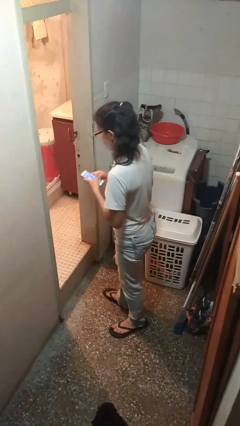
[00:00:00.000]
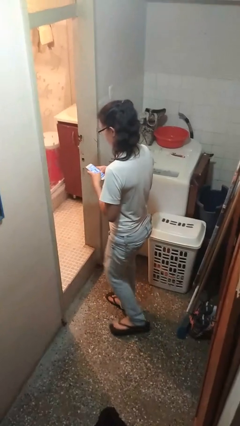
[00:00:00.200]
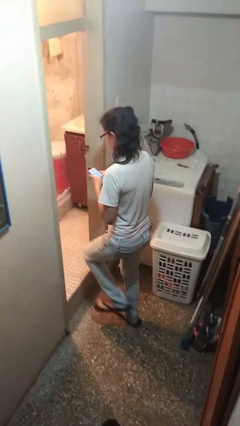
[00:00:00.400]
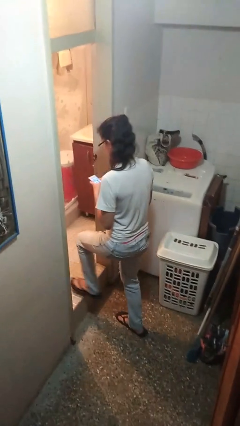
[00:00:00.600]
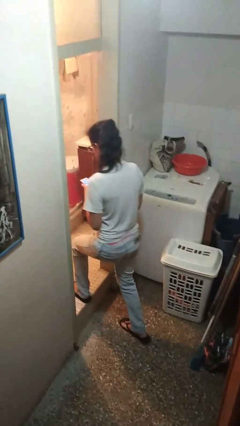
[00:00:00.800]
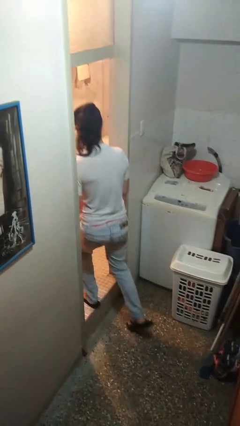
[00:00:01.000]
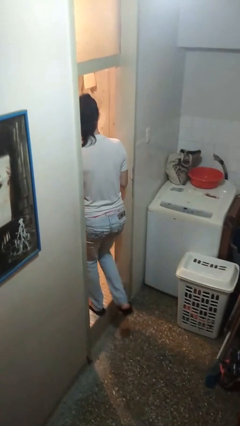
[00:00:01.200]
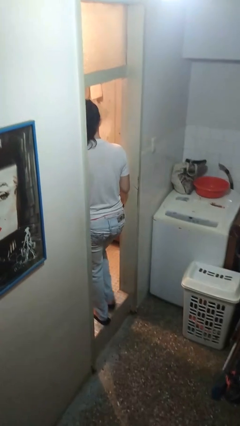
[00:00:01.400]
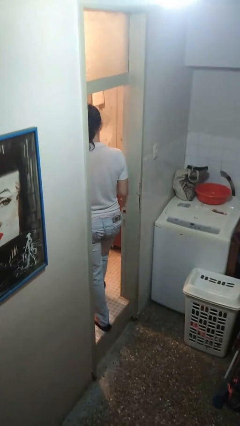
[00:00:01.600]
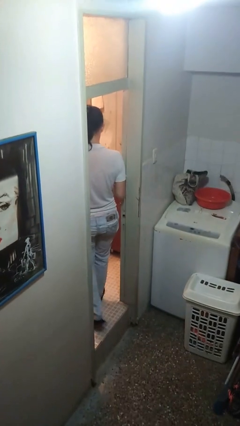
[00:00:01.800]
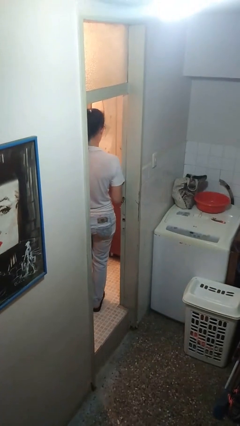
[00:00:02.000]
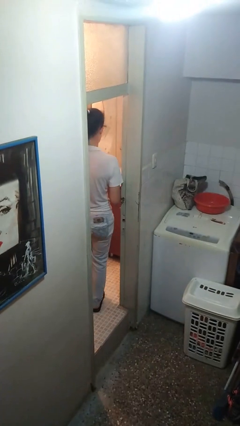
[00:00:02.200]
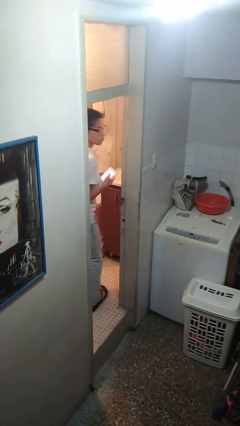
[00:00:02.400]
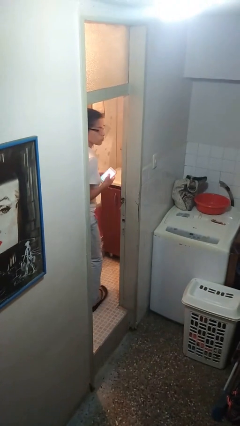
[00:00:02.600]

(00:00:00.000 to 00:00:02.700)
person exits scene through structure

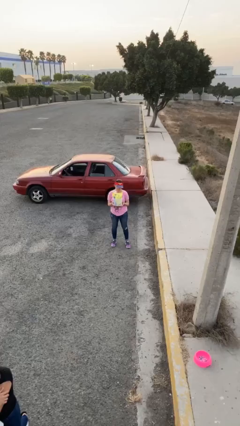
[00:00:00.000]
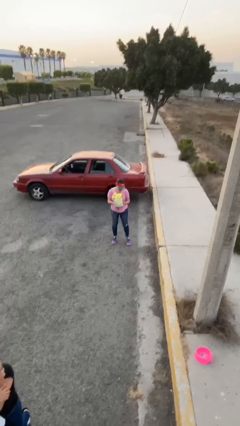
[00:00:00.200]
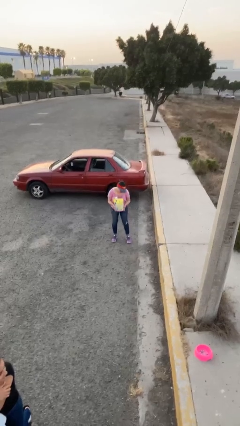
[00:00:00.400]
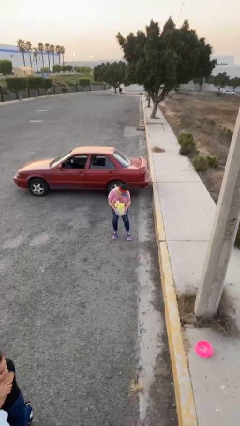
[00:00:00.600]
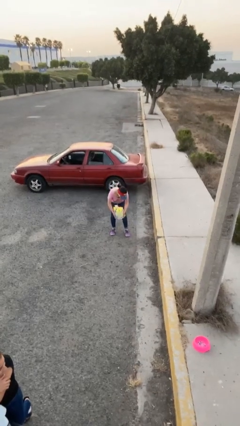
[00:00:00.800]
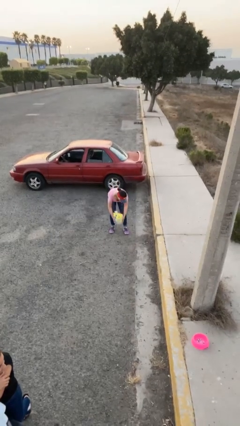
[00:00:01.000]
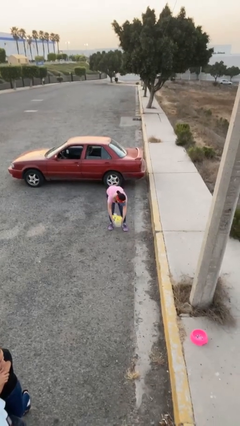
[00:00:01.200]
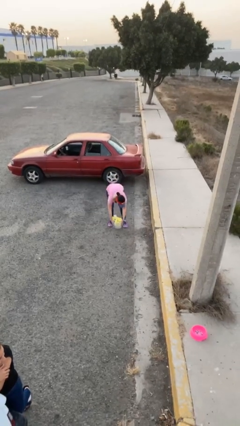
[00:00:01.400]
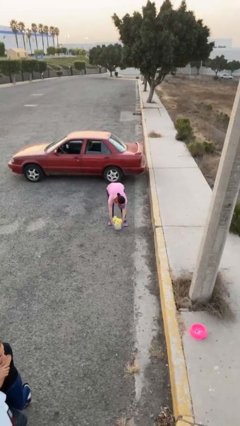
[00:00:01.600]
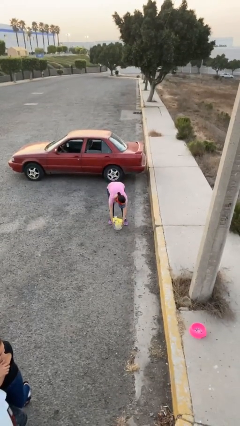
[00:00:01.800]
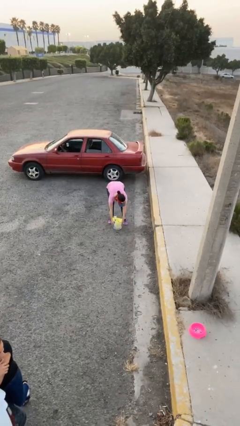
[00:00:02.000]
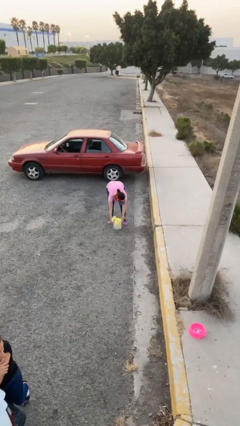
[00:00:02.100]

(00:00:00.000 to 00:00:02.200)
person puts down object on floor

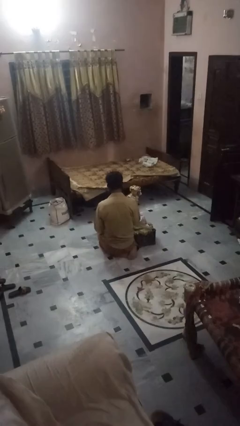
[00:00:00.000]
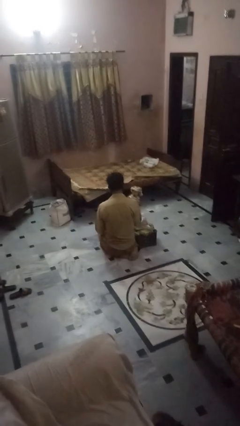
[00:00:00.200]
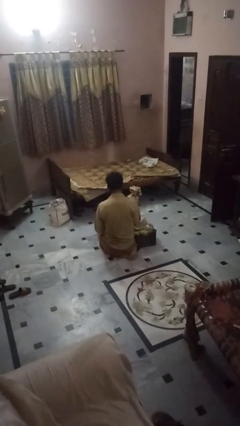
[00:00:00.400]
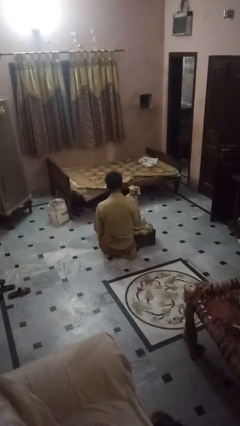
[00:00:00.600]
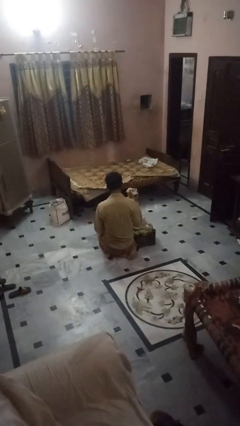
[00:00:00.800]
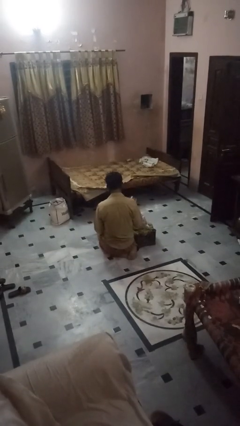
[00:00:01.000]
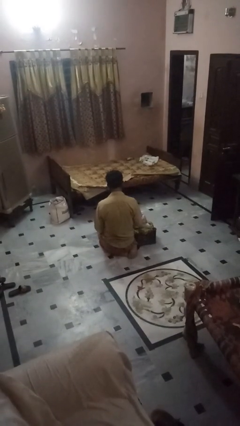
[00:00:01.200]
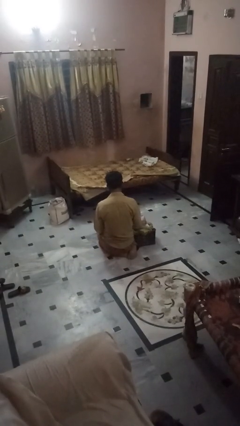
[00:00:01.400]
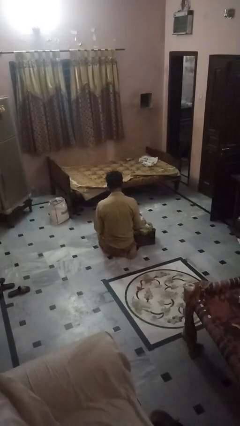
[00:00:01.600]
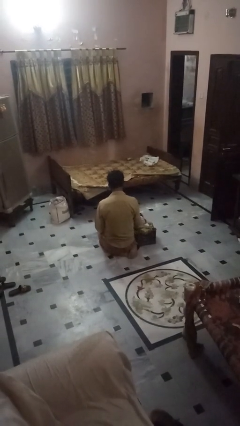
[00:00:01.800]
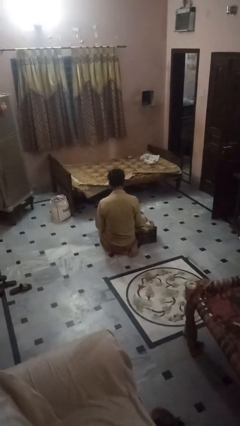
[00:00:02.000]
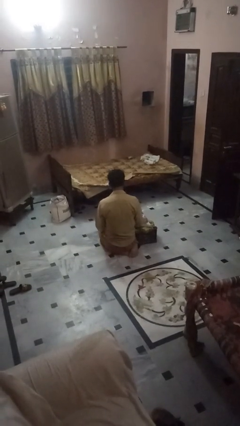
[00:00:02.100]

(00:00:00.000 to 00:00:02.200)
person puts object into bag

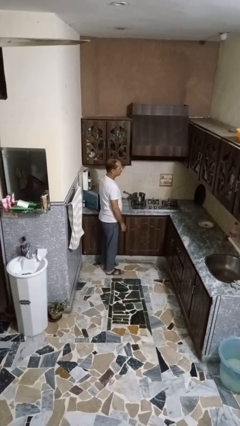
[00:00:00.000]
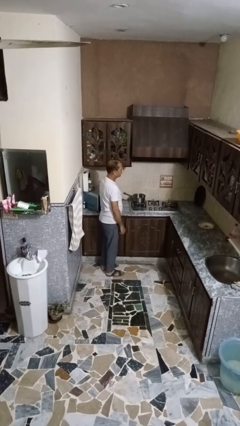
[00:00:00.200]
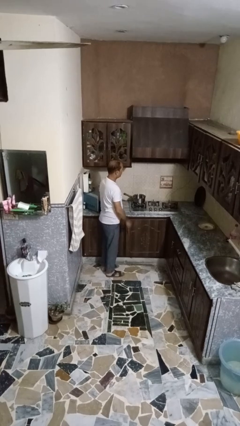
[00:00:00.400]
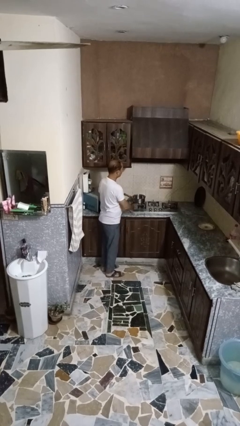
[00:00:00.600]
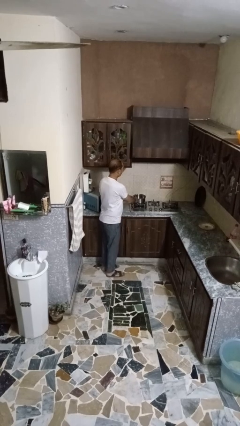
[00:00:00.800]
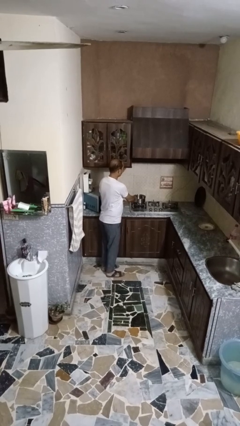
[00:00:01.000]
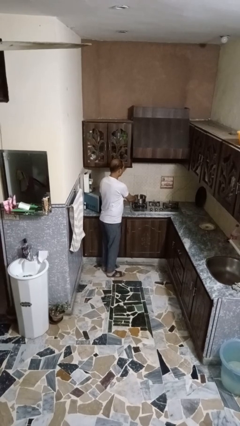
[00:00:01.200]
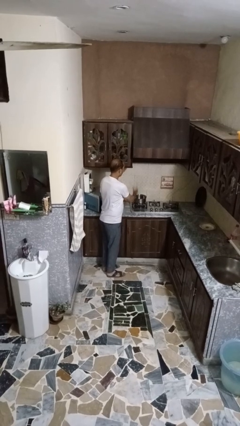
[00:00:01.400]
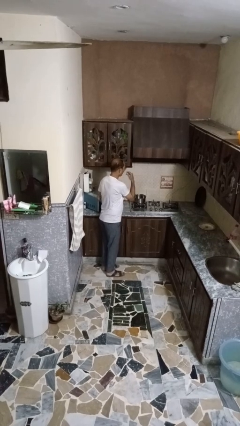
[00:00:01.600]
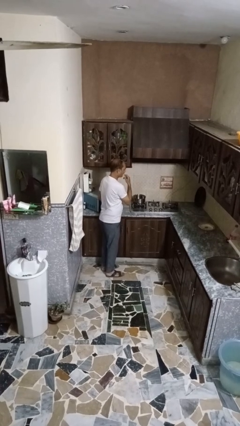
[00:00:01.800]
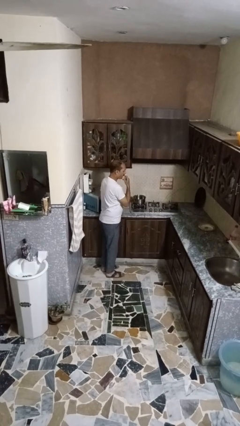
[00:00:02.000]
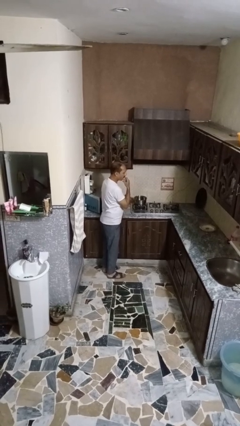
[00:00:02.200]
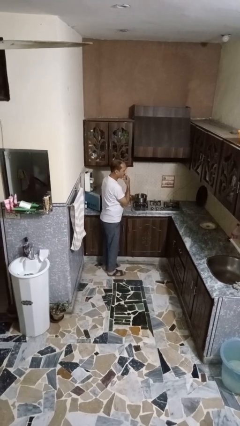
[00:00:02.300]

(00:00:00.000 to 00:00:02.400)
person burns hand

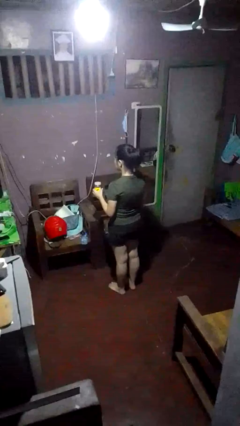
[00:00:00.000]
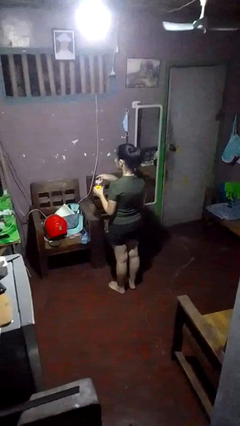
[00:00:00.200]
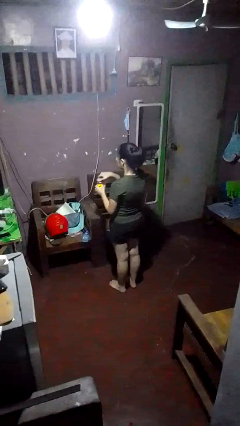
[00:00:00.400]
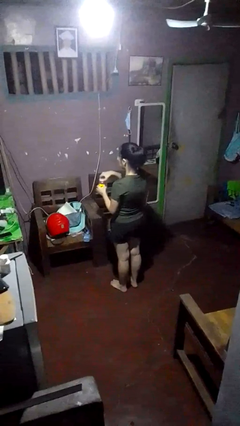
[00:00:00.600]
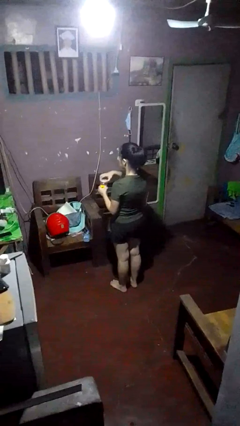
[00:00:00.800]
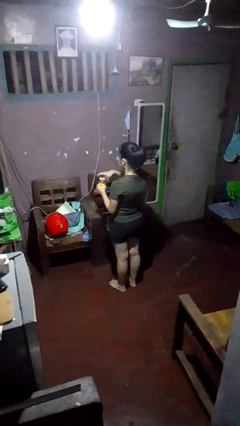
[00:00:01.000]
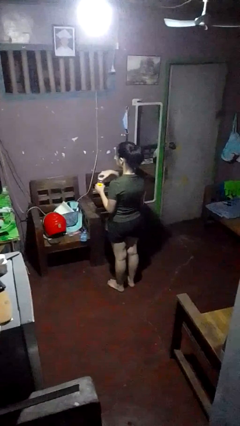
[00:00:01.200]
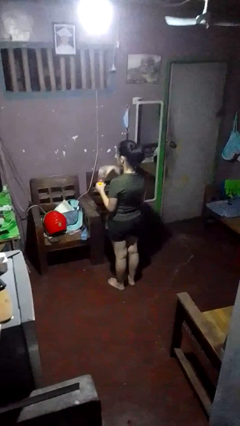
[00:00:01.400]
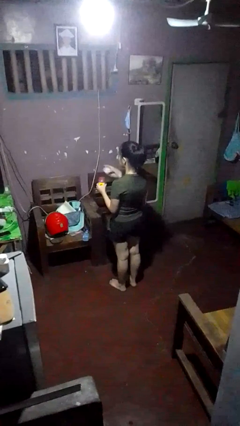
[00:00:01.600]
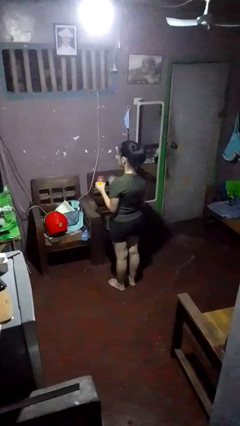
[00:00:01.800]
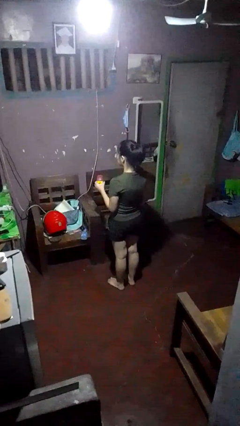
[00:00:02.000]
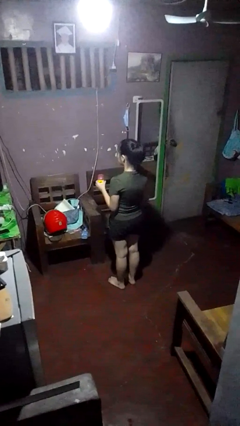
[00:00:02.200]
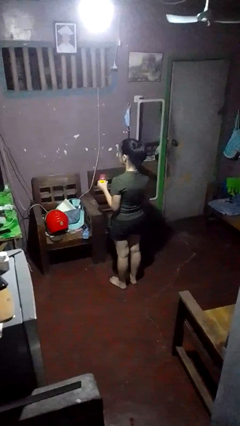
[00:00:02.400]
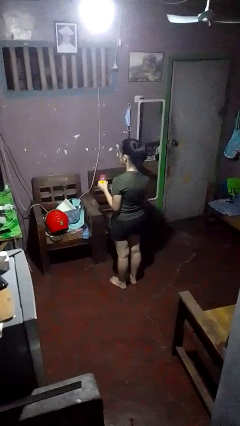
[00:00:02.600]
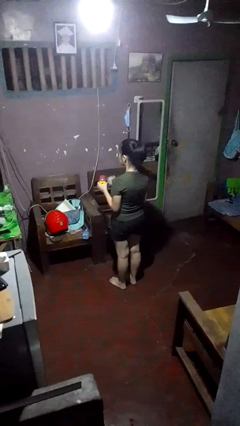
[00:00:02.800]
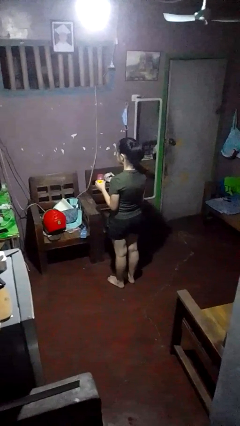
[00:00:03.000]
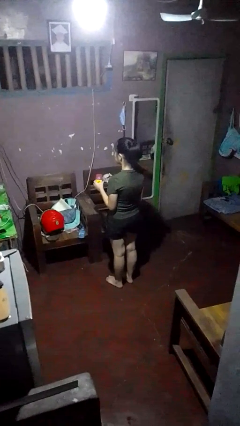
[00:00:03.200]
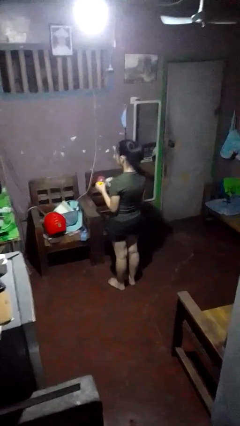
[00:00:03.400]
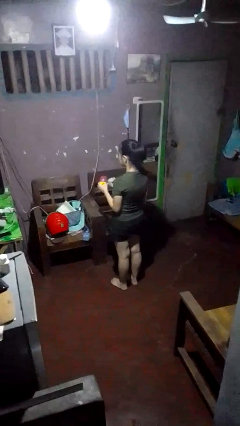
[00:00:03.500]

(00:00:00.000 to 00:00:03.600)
person opens jar

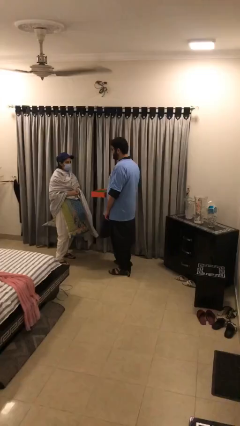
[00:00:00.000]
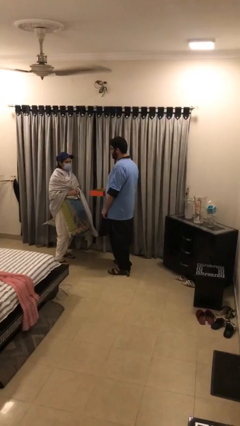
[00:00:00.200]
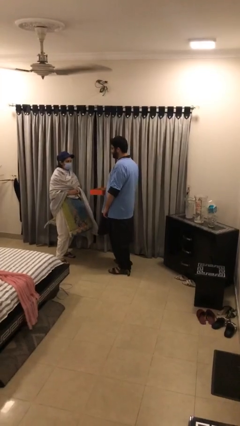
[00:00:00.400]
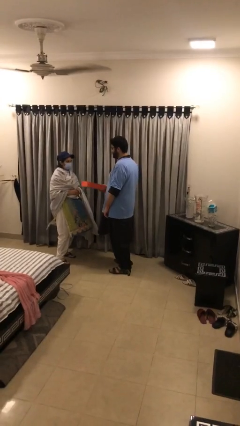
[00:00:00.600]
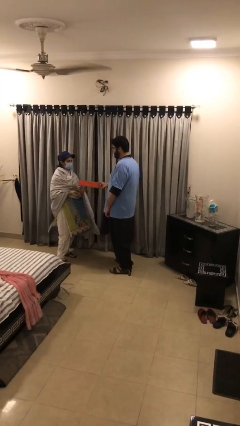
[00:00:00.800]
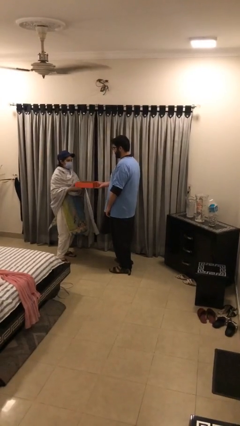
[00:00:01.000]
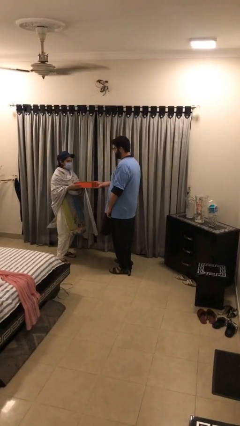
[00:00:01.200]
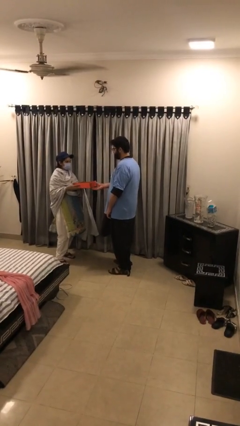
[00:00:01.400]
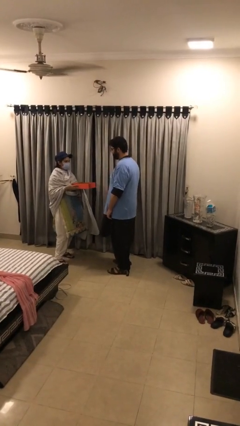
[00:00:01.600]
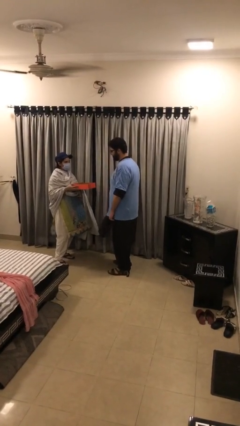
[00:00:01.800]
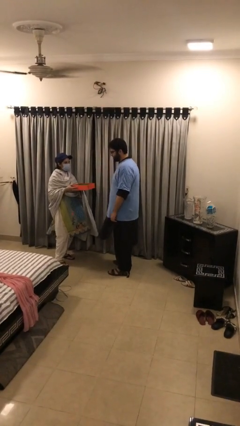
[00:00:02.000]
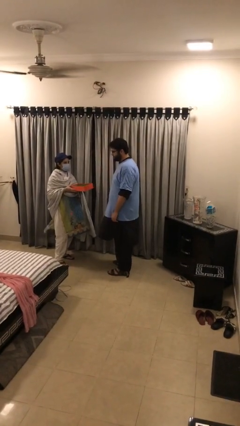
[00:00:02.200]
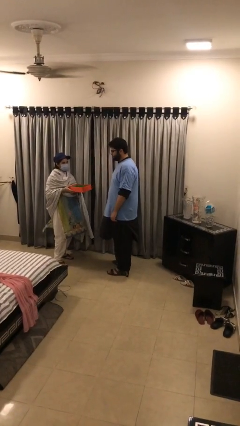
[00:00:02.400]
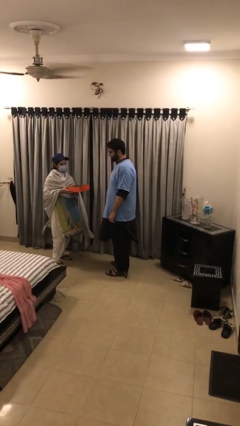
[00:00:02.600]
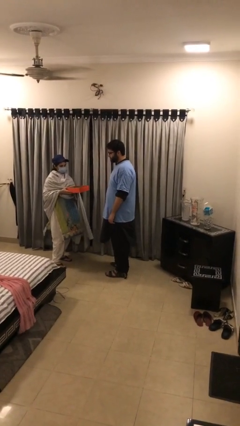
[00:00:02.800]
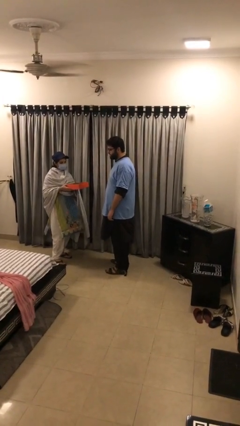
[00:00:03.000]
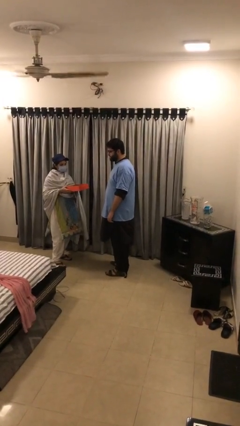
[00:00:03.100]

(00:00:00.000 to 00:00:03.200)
person transfers object to person

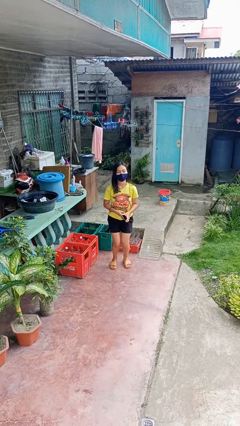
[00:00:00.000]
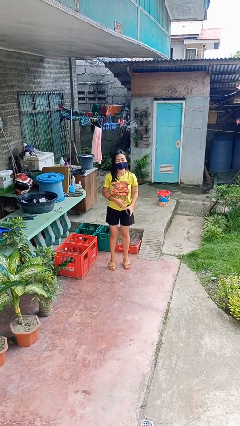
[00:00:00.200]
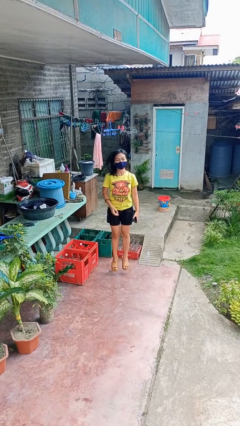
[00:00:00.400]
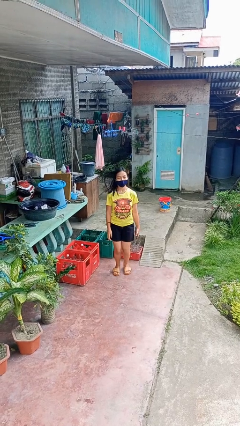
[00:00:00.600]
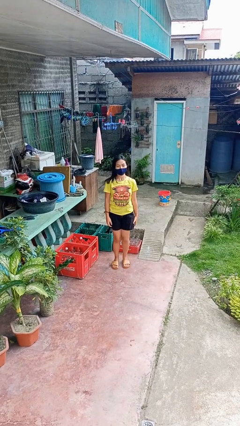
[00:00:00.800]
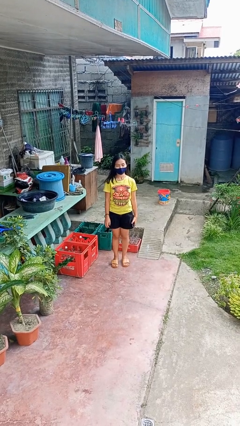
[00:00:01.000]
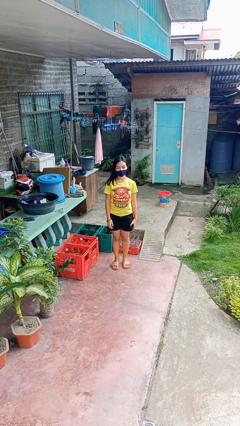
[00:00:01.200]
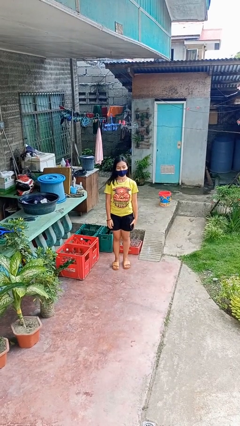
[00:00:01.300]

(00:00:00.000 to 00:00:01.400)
person jumps
